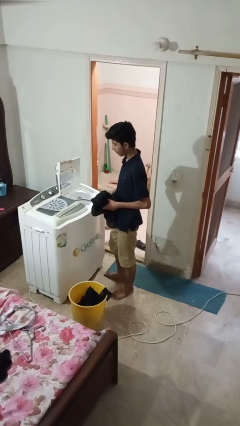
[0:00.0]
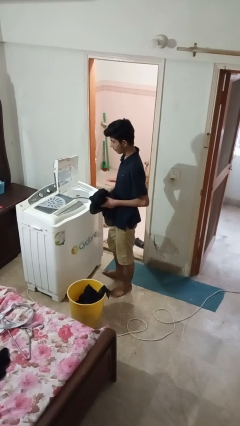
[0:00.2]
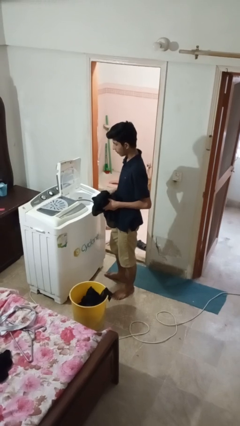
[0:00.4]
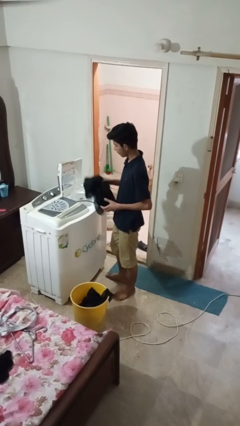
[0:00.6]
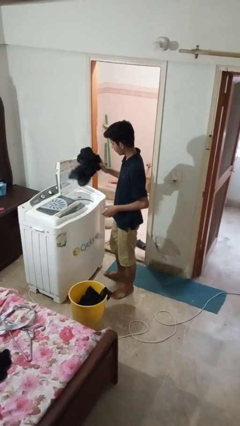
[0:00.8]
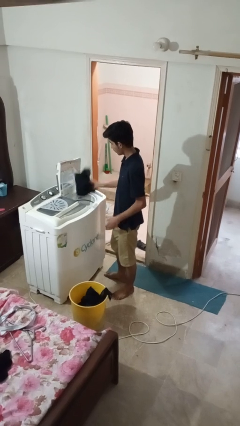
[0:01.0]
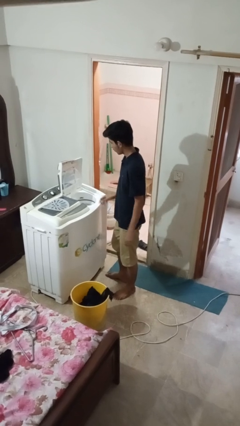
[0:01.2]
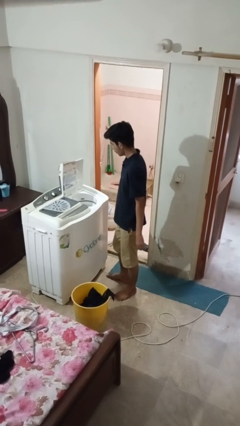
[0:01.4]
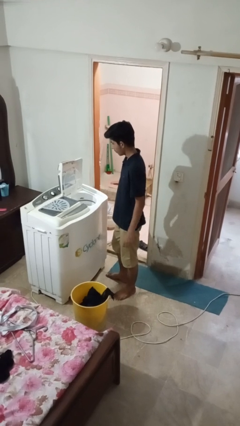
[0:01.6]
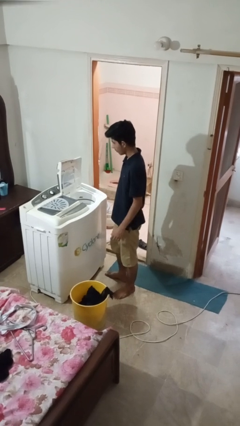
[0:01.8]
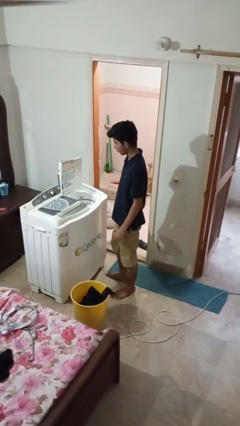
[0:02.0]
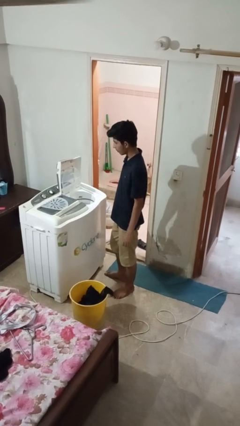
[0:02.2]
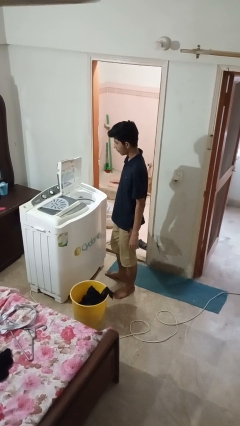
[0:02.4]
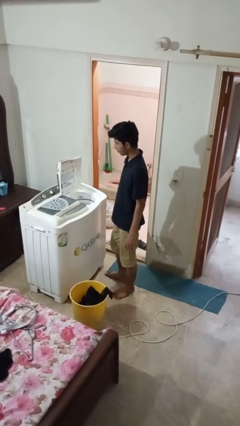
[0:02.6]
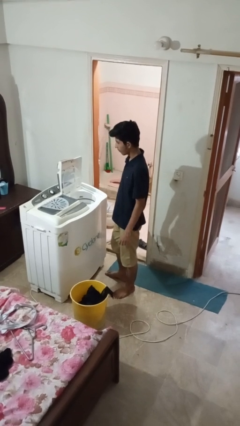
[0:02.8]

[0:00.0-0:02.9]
person loads dryer

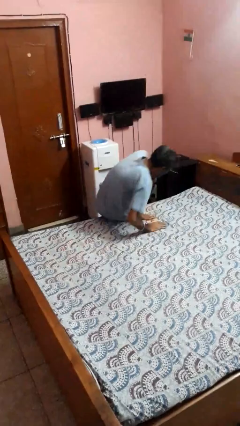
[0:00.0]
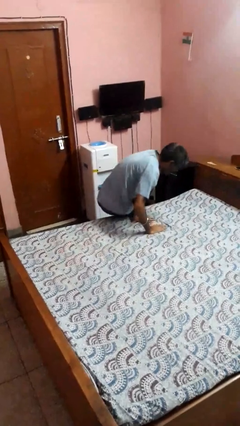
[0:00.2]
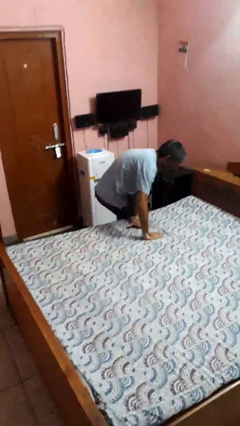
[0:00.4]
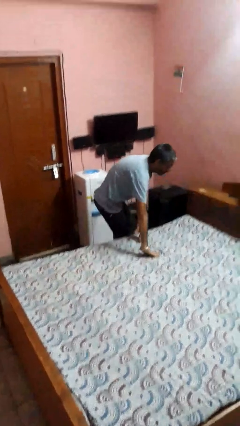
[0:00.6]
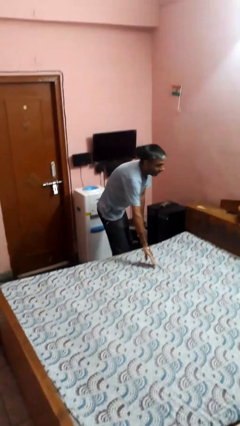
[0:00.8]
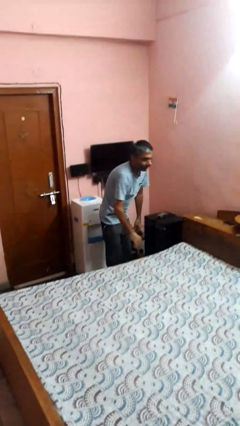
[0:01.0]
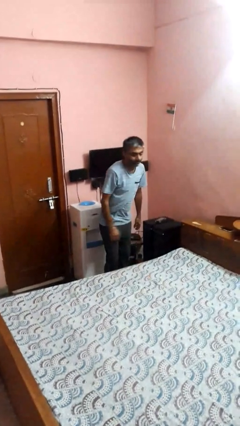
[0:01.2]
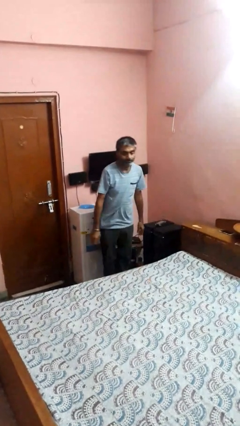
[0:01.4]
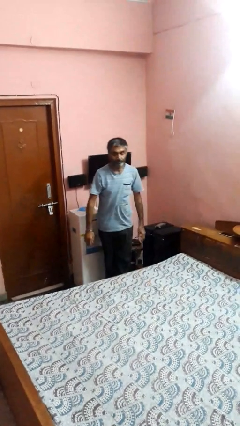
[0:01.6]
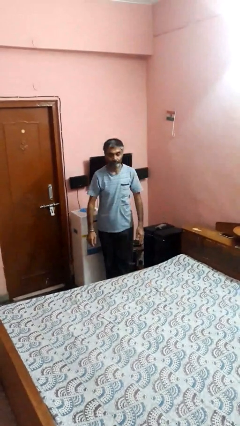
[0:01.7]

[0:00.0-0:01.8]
person stands up

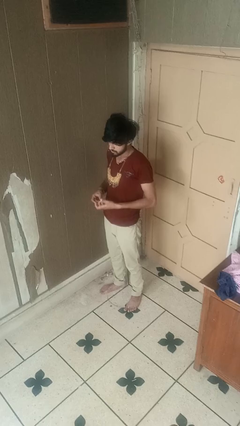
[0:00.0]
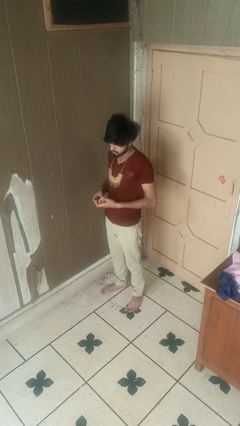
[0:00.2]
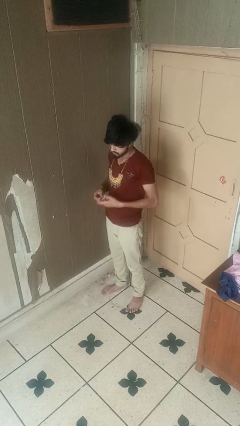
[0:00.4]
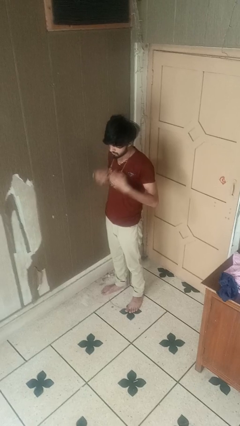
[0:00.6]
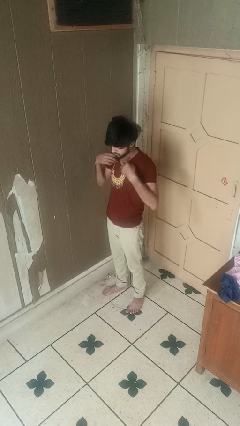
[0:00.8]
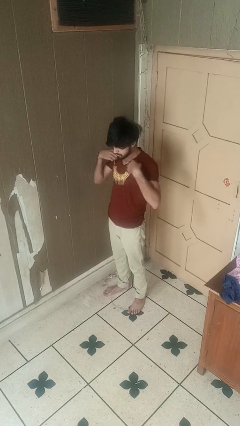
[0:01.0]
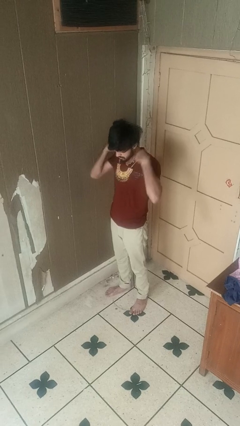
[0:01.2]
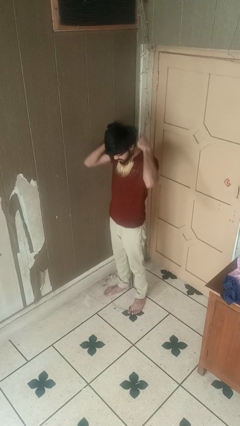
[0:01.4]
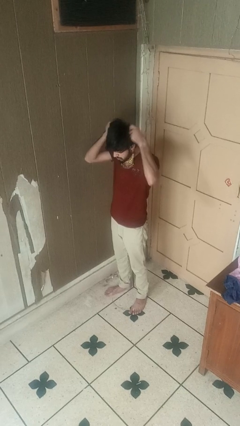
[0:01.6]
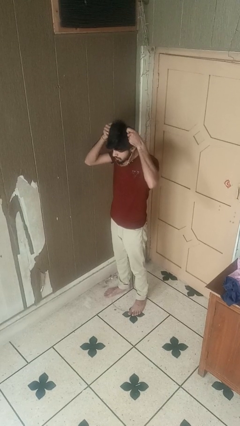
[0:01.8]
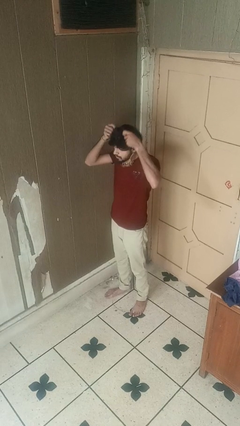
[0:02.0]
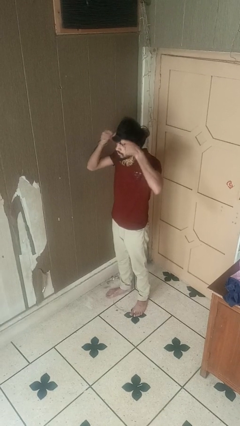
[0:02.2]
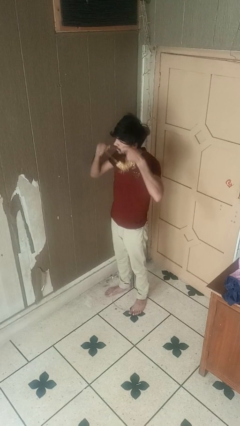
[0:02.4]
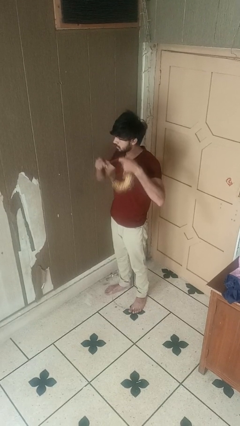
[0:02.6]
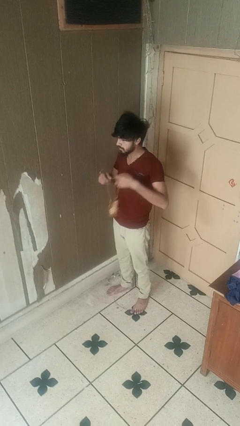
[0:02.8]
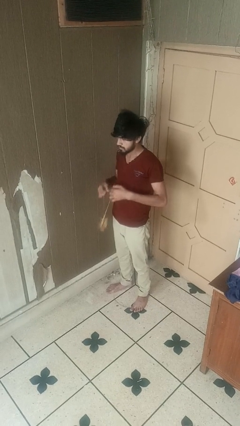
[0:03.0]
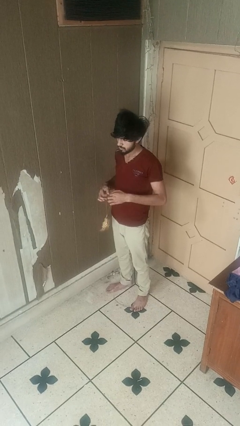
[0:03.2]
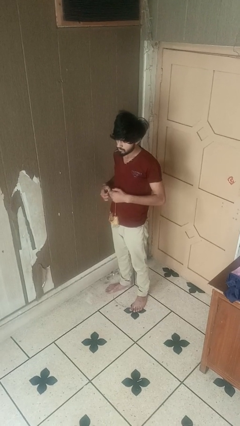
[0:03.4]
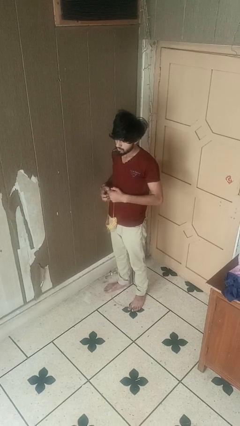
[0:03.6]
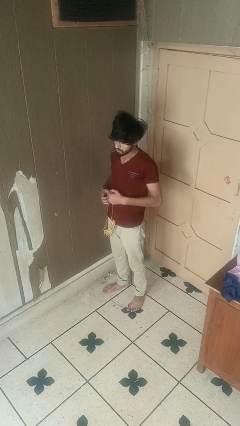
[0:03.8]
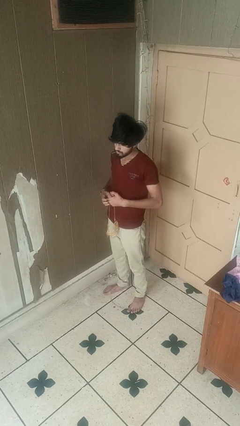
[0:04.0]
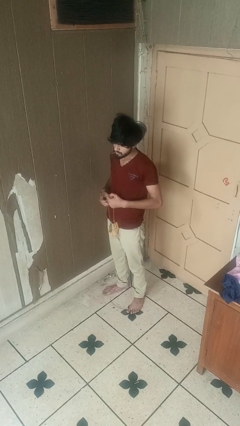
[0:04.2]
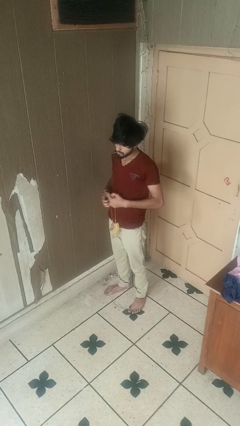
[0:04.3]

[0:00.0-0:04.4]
person takes off necklace

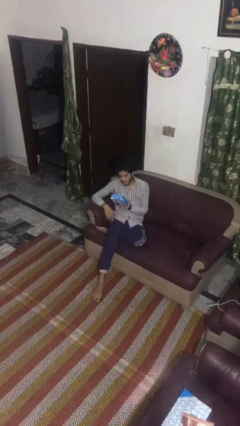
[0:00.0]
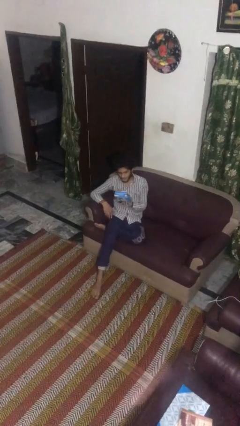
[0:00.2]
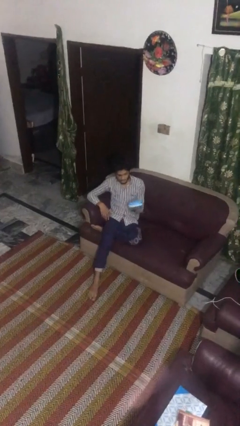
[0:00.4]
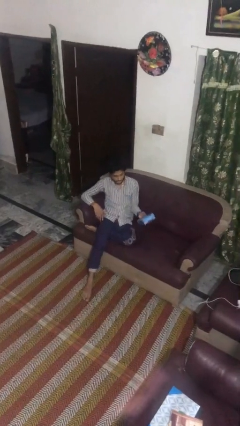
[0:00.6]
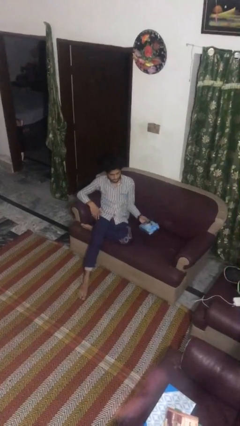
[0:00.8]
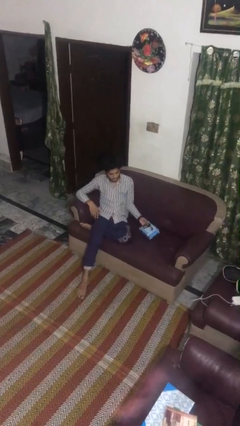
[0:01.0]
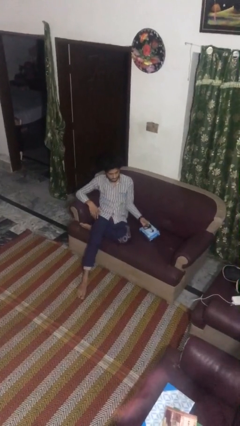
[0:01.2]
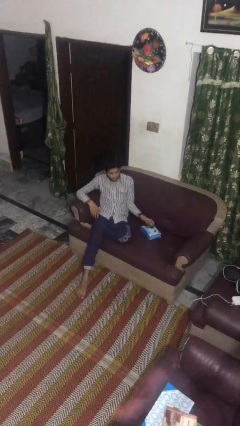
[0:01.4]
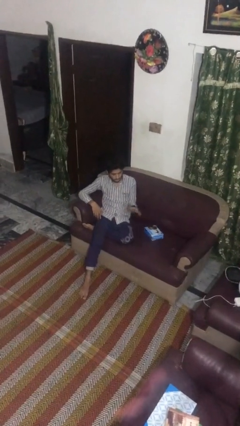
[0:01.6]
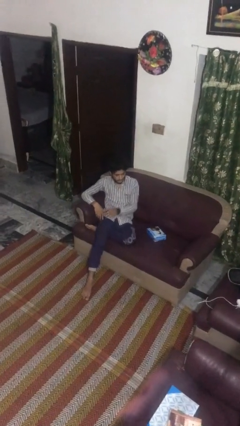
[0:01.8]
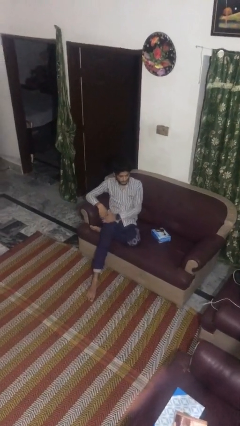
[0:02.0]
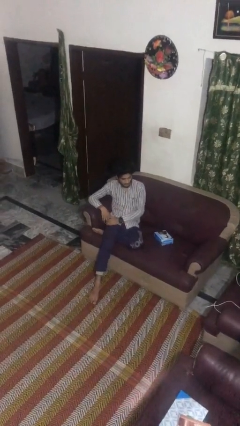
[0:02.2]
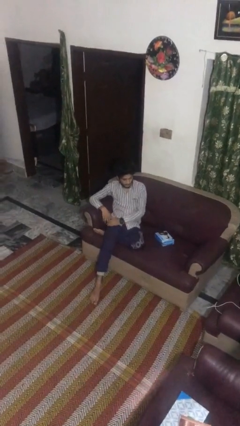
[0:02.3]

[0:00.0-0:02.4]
person puts down object on couch

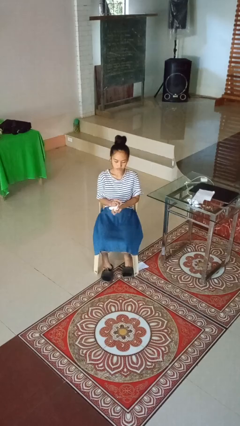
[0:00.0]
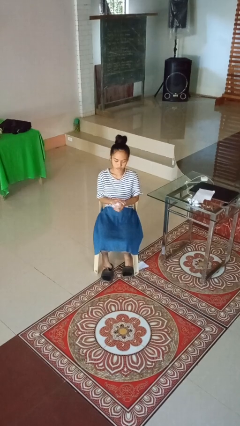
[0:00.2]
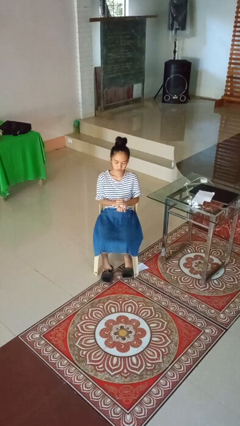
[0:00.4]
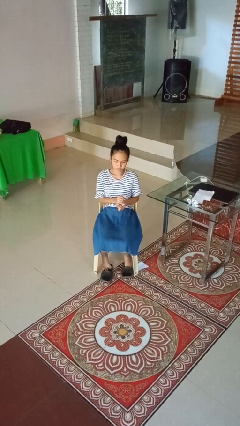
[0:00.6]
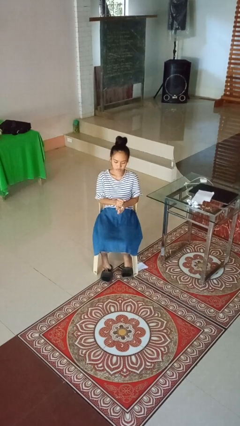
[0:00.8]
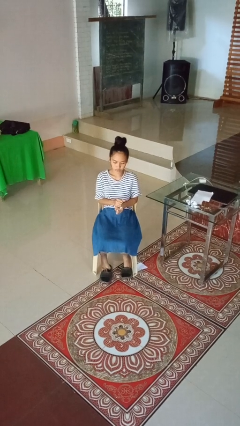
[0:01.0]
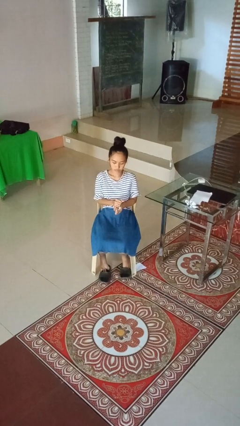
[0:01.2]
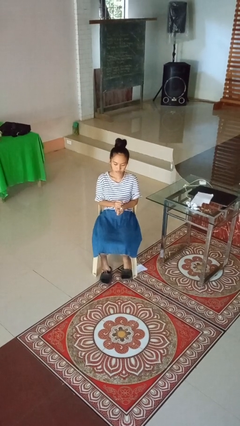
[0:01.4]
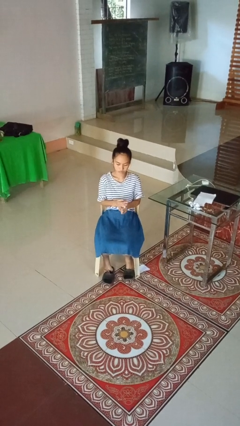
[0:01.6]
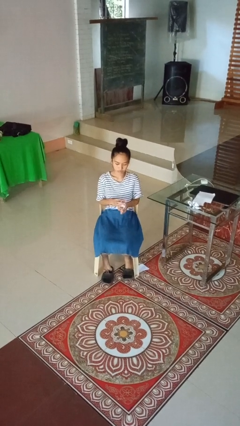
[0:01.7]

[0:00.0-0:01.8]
person crumples paper

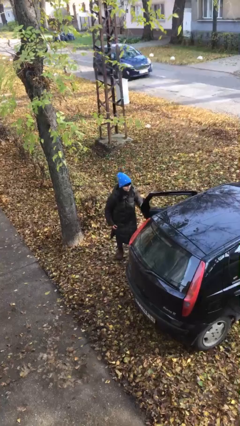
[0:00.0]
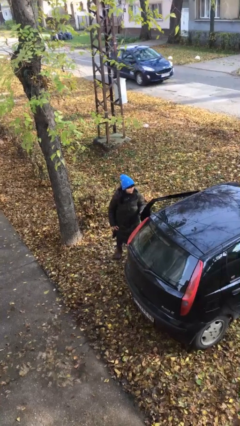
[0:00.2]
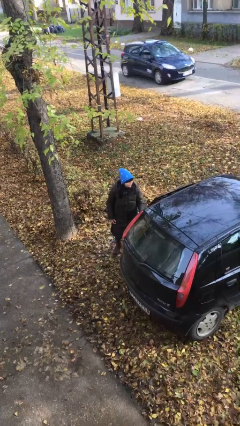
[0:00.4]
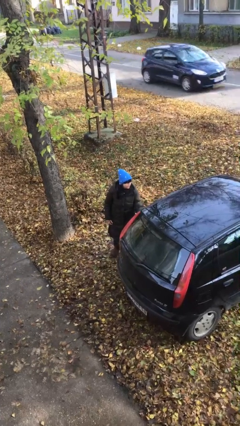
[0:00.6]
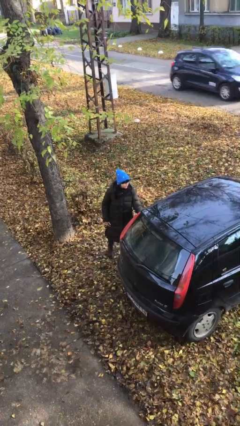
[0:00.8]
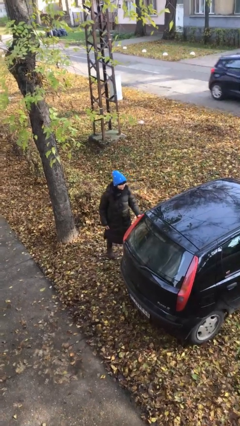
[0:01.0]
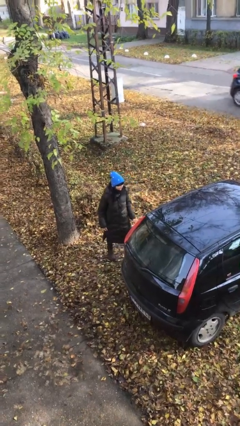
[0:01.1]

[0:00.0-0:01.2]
person closes car door

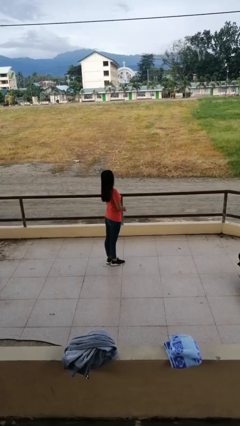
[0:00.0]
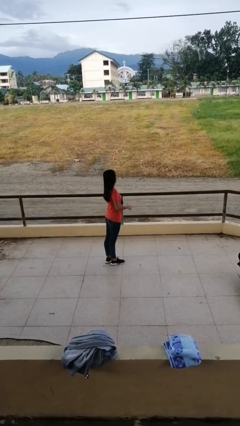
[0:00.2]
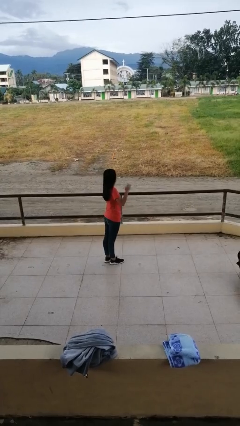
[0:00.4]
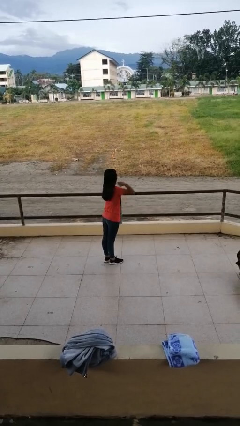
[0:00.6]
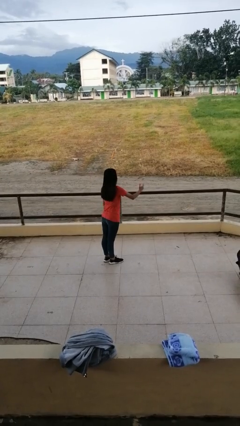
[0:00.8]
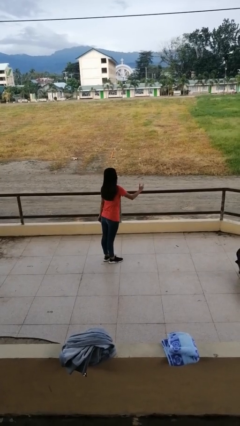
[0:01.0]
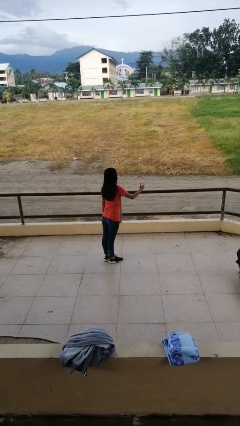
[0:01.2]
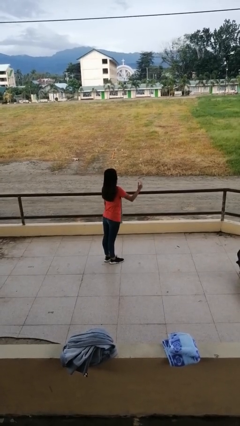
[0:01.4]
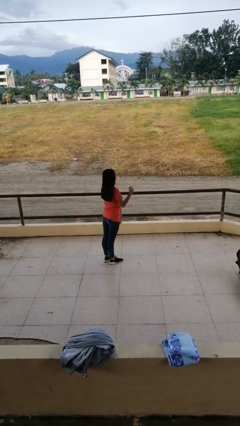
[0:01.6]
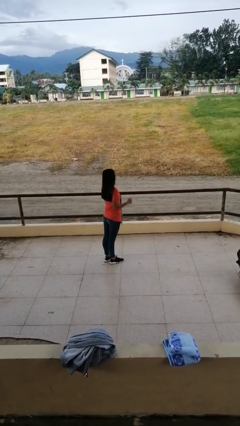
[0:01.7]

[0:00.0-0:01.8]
person karate chop

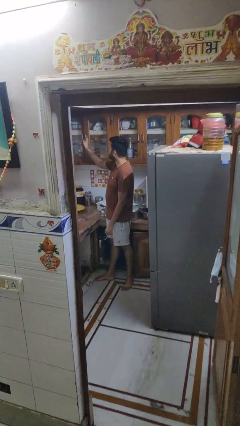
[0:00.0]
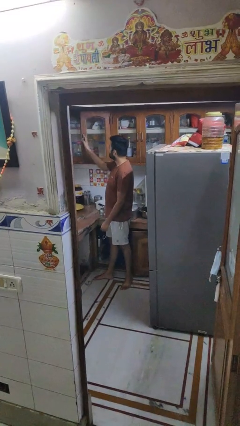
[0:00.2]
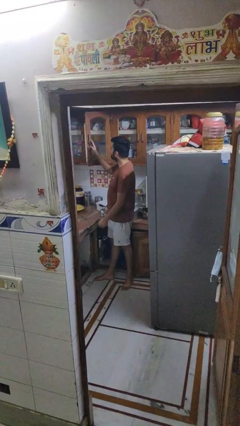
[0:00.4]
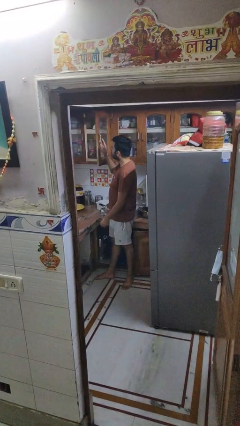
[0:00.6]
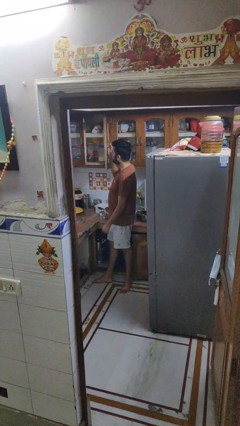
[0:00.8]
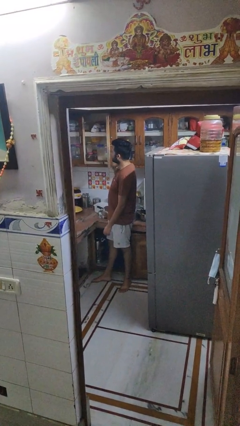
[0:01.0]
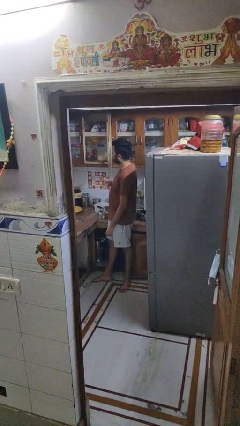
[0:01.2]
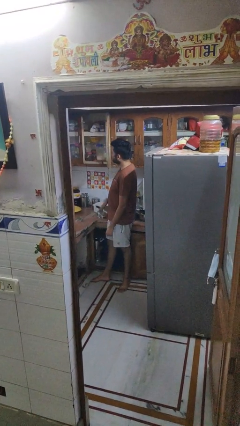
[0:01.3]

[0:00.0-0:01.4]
person opens cabinet
